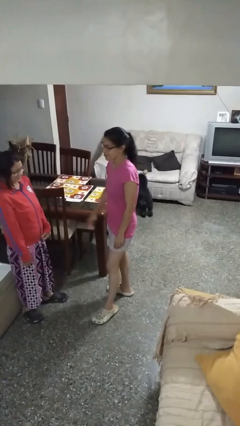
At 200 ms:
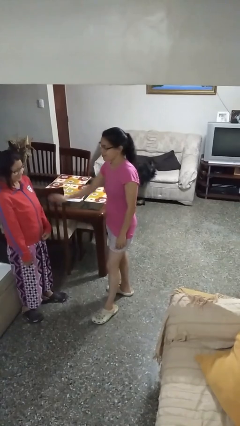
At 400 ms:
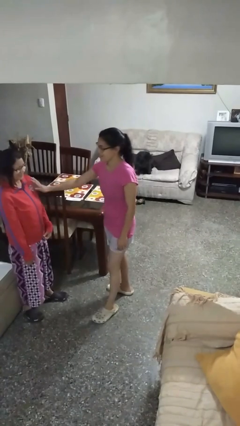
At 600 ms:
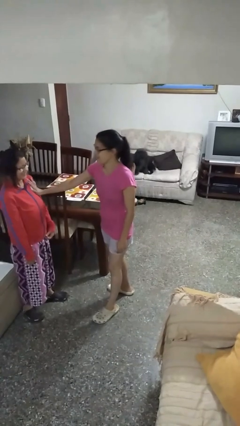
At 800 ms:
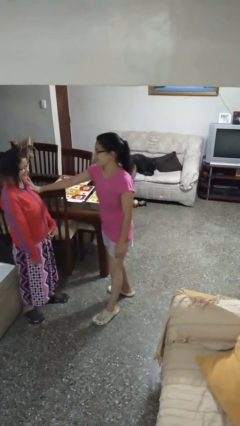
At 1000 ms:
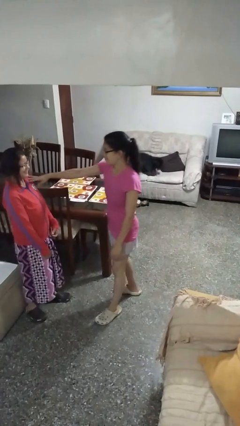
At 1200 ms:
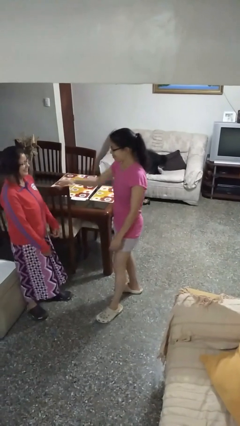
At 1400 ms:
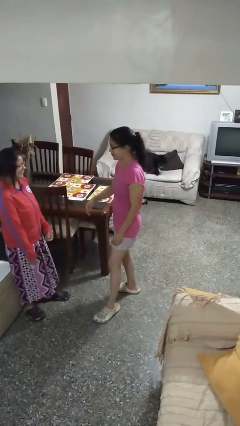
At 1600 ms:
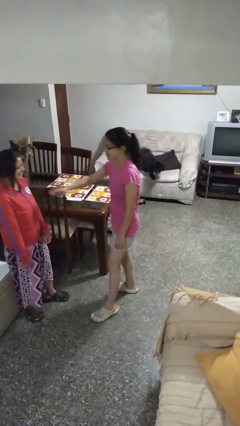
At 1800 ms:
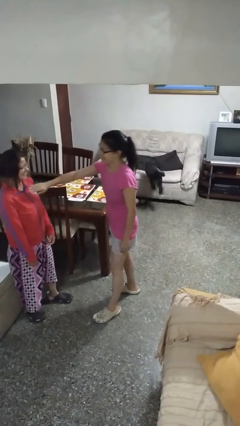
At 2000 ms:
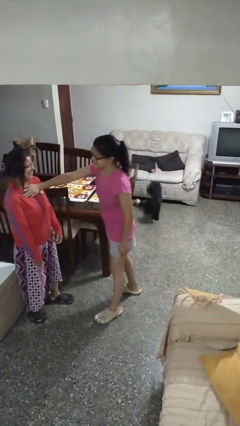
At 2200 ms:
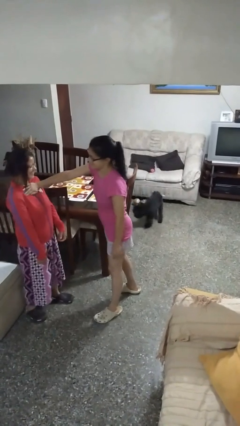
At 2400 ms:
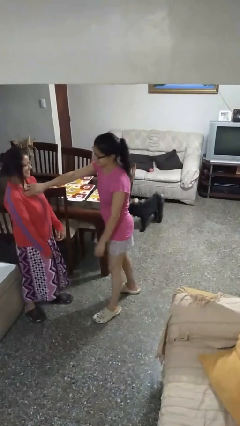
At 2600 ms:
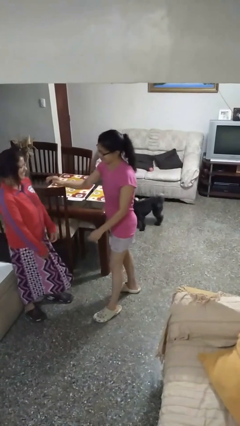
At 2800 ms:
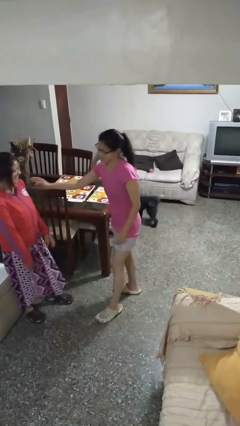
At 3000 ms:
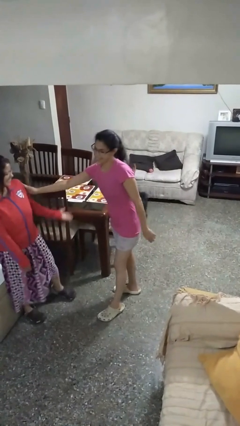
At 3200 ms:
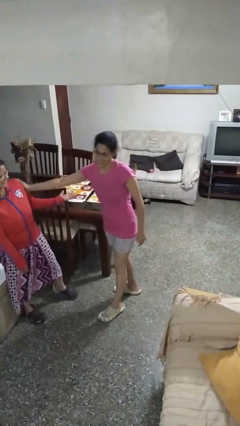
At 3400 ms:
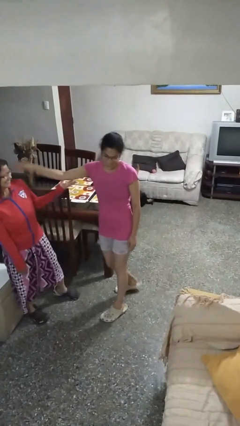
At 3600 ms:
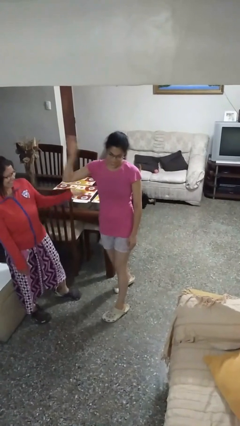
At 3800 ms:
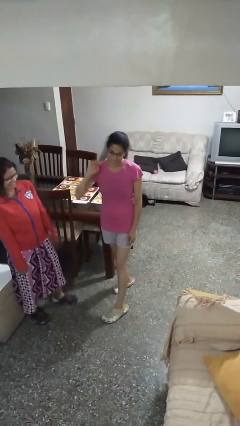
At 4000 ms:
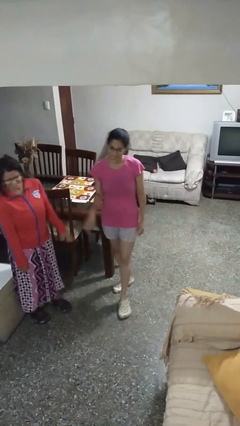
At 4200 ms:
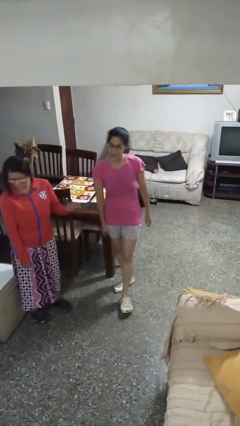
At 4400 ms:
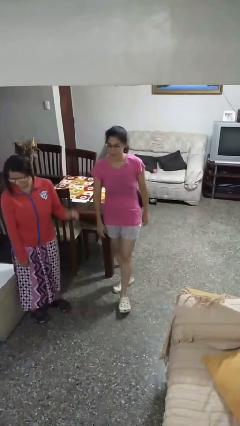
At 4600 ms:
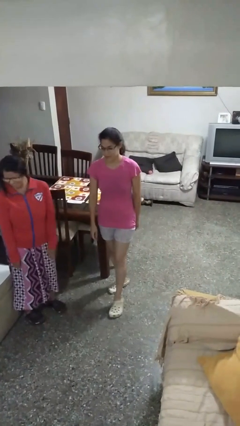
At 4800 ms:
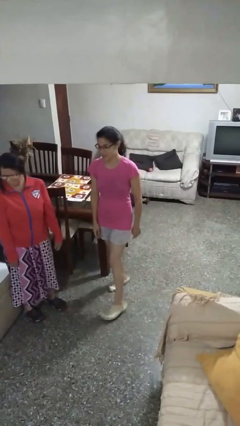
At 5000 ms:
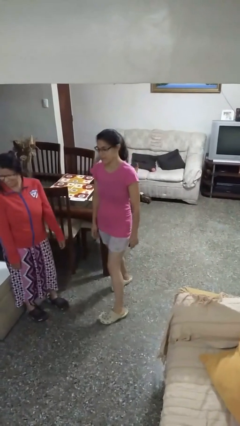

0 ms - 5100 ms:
person shoves person

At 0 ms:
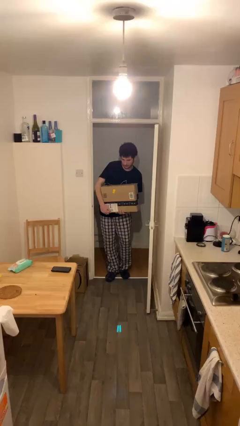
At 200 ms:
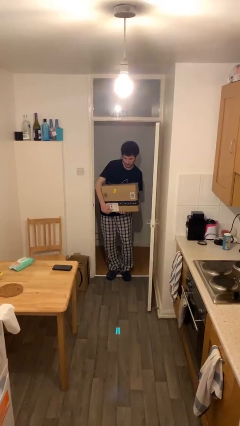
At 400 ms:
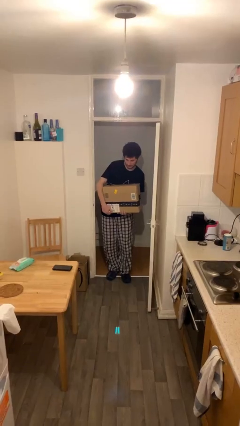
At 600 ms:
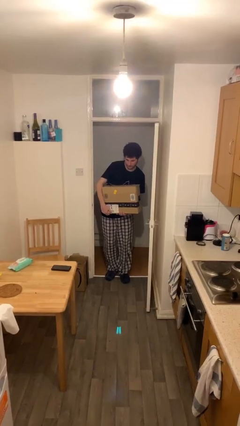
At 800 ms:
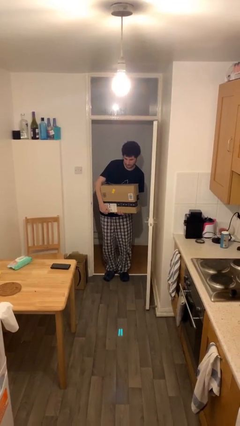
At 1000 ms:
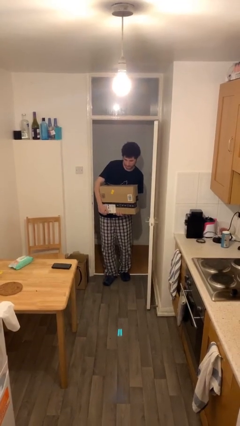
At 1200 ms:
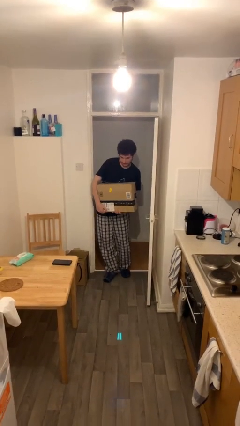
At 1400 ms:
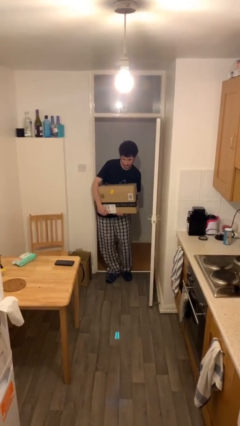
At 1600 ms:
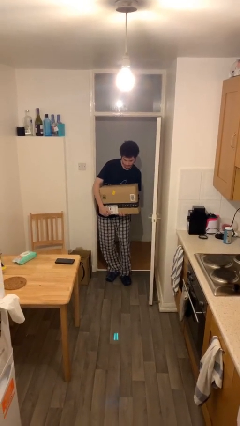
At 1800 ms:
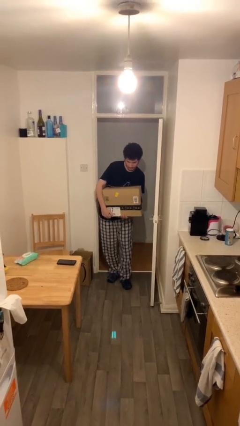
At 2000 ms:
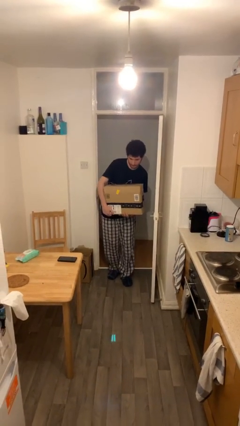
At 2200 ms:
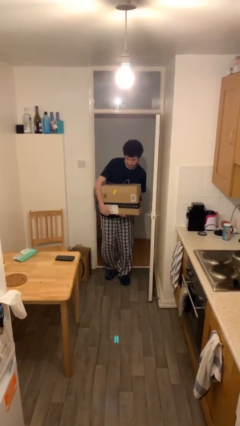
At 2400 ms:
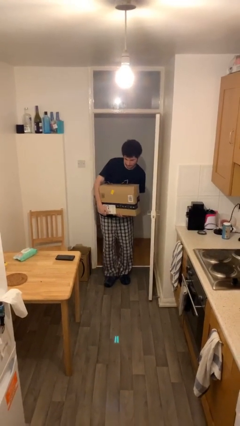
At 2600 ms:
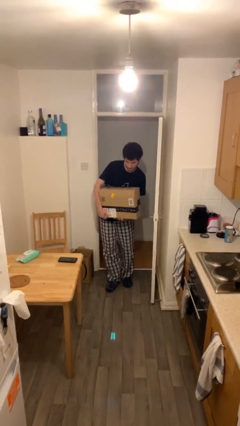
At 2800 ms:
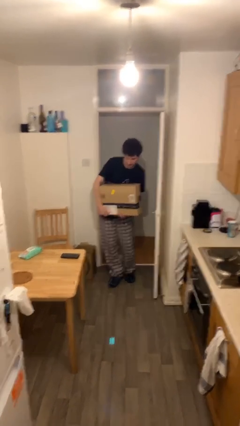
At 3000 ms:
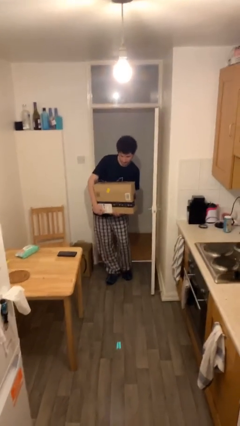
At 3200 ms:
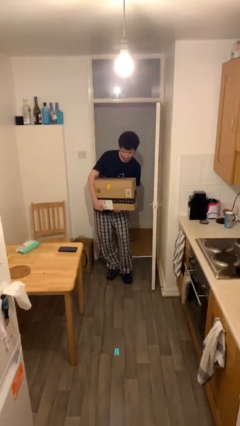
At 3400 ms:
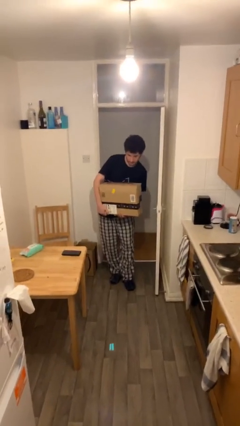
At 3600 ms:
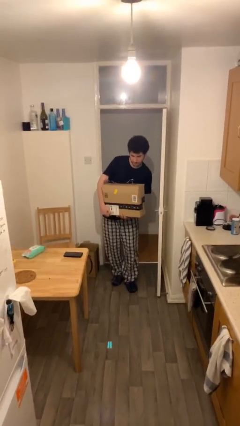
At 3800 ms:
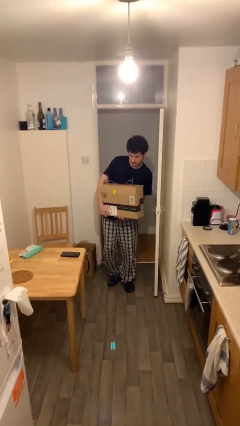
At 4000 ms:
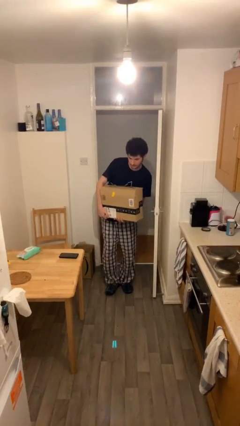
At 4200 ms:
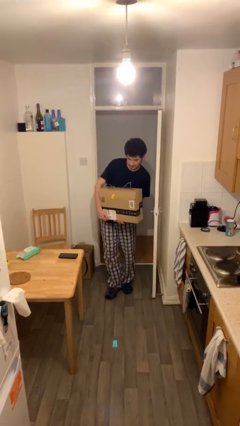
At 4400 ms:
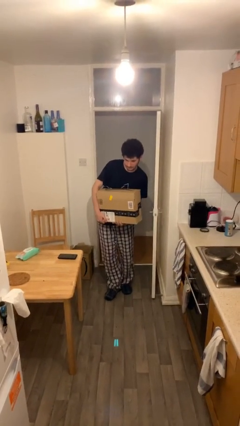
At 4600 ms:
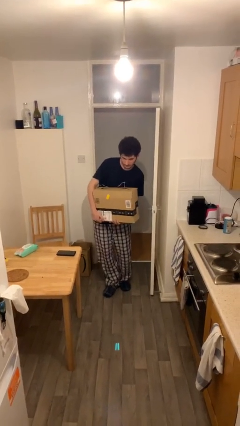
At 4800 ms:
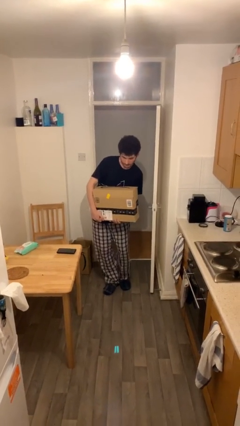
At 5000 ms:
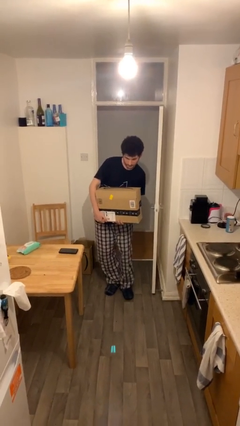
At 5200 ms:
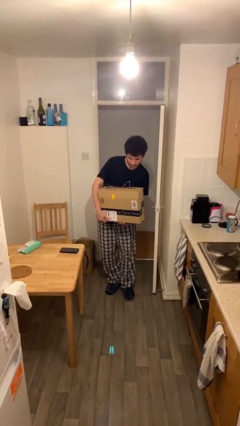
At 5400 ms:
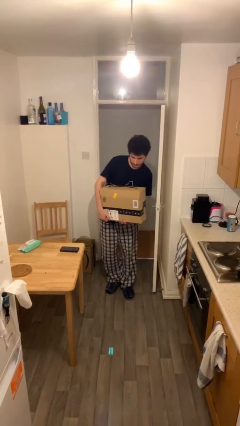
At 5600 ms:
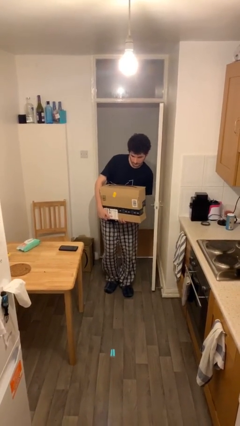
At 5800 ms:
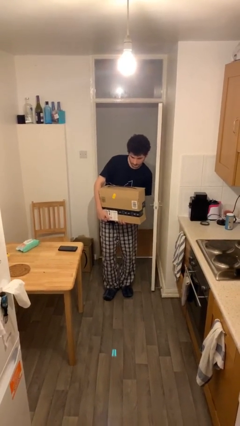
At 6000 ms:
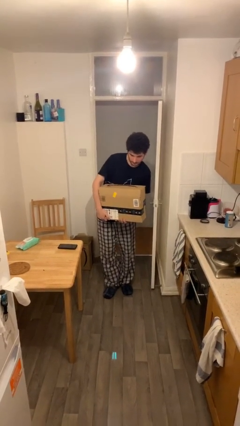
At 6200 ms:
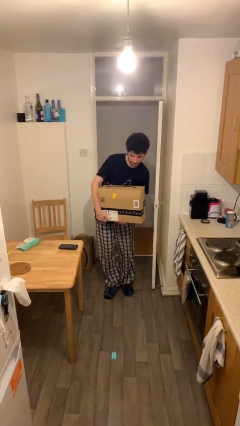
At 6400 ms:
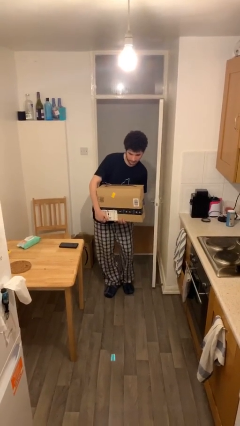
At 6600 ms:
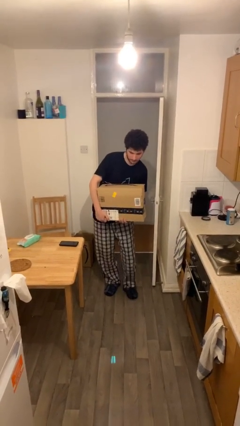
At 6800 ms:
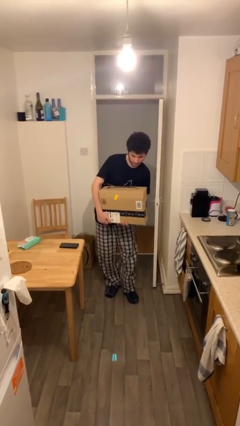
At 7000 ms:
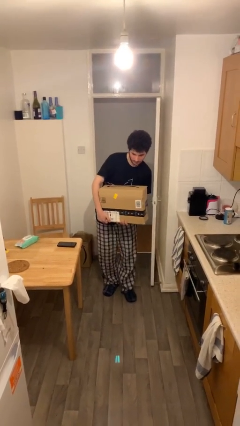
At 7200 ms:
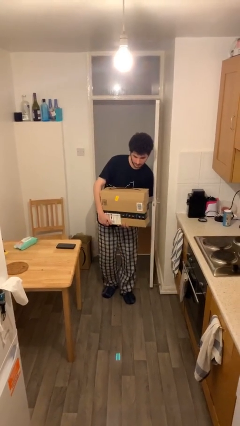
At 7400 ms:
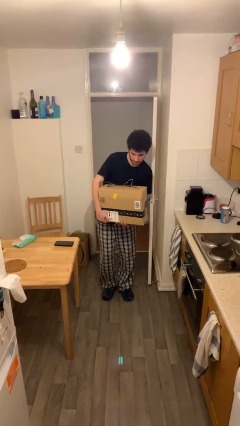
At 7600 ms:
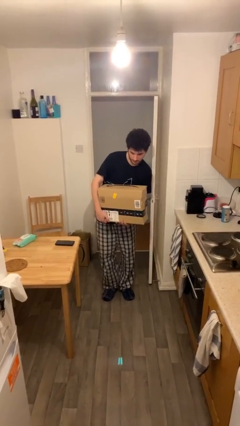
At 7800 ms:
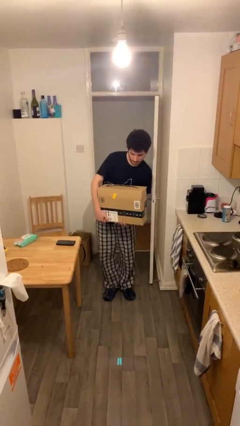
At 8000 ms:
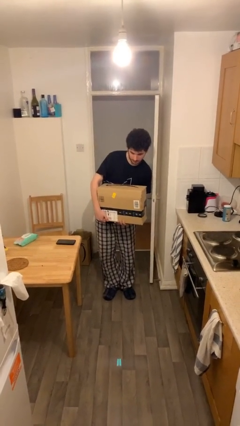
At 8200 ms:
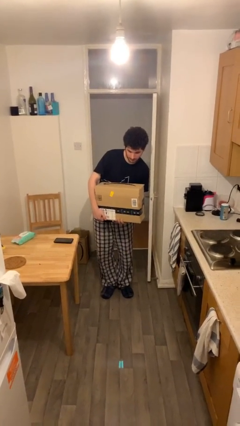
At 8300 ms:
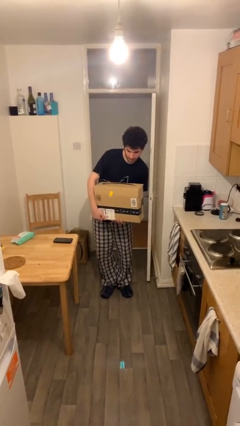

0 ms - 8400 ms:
person carries heavy object

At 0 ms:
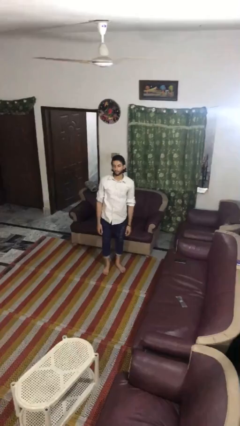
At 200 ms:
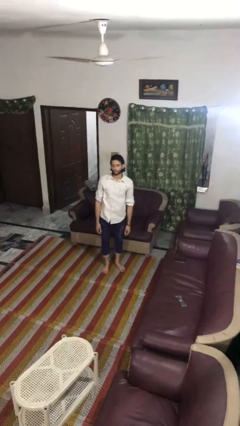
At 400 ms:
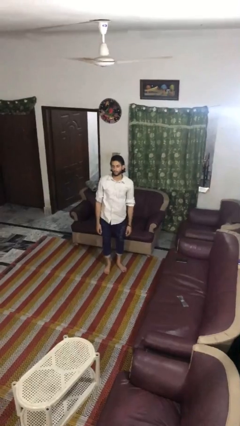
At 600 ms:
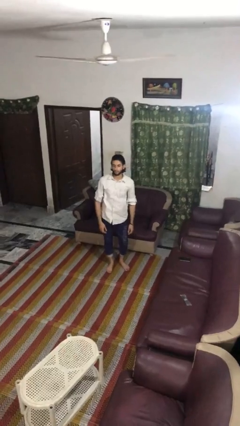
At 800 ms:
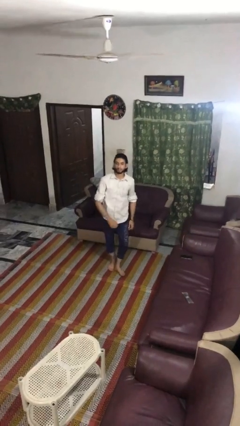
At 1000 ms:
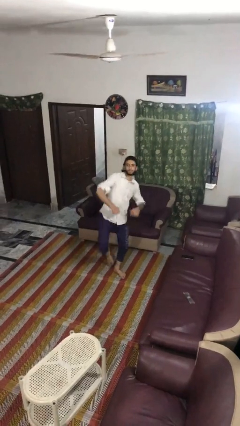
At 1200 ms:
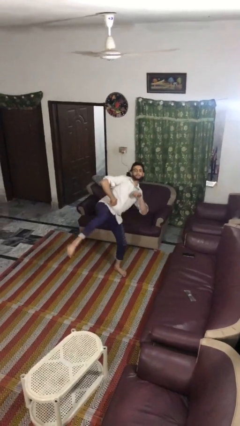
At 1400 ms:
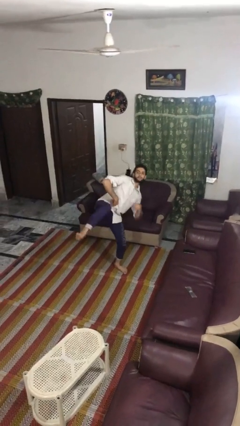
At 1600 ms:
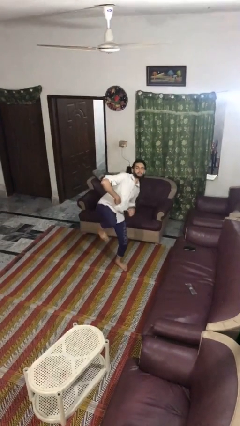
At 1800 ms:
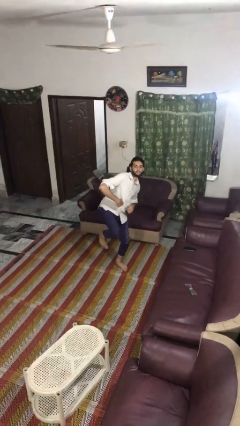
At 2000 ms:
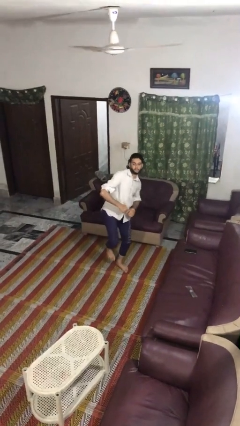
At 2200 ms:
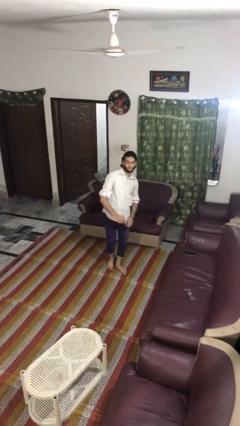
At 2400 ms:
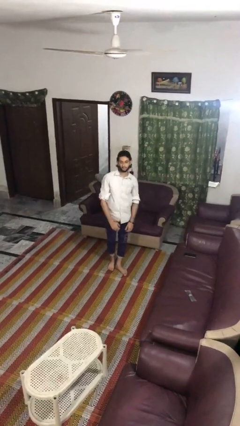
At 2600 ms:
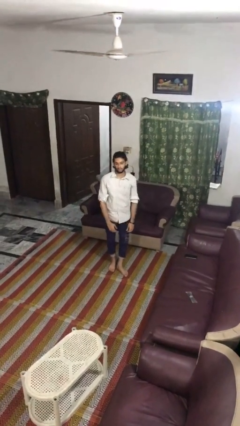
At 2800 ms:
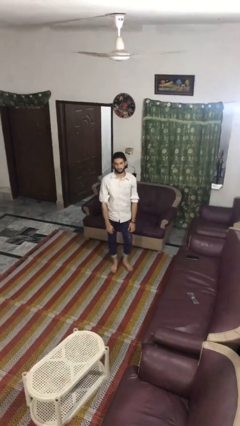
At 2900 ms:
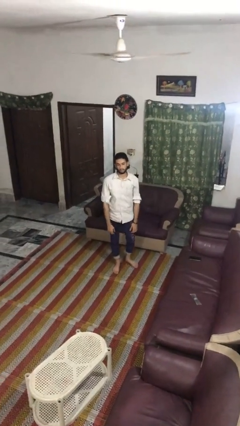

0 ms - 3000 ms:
person karate kicks

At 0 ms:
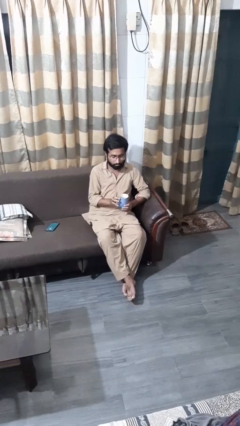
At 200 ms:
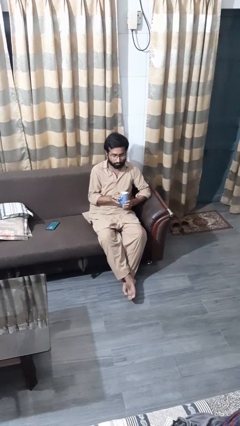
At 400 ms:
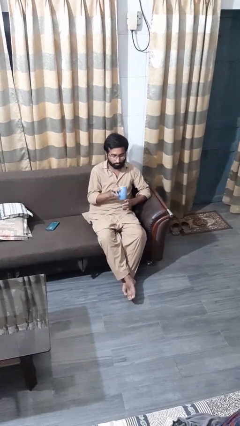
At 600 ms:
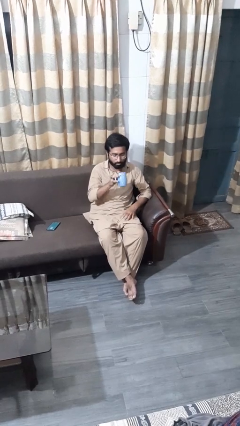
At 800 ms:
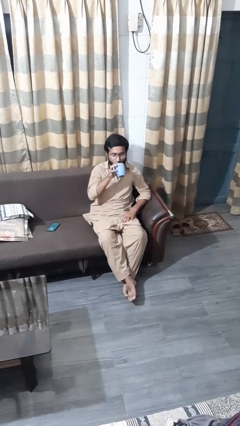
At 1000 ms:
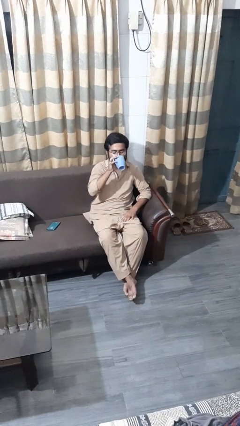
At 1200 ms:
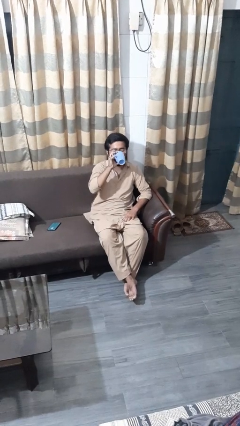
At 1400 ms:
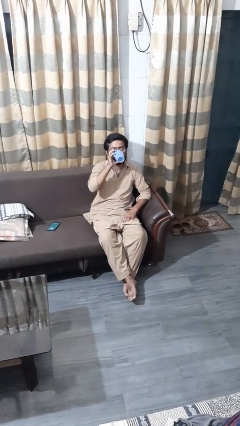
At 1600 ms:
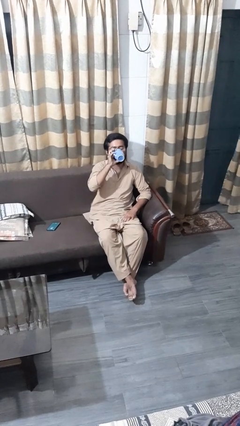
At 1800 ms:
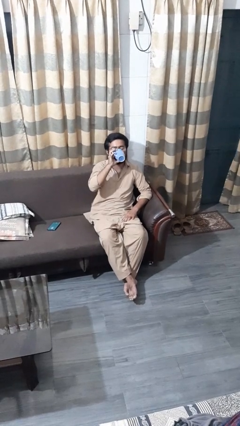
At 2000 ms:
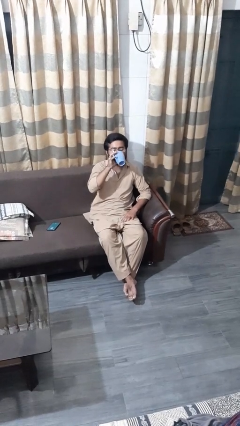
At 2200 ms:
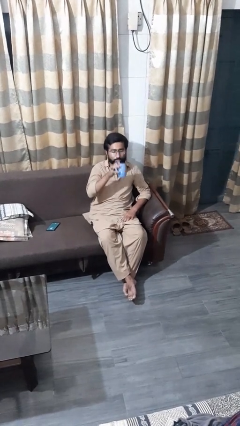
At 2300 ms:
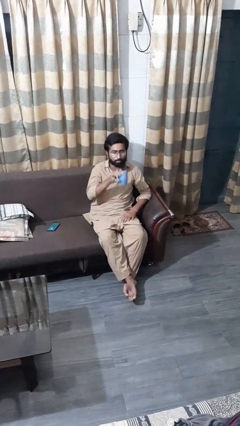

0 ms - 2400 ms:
person drinks from mug
